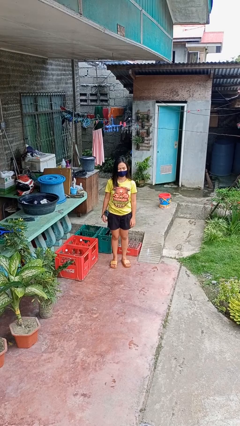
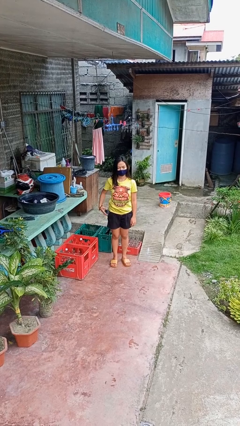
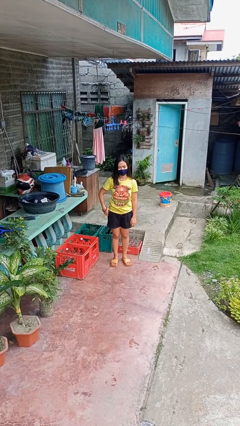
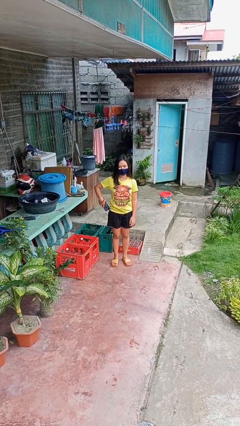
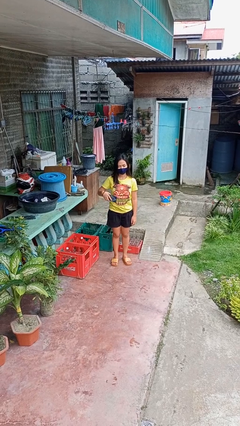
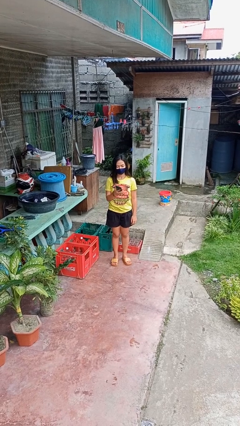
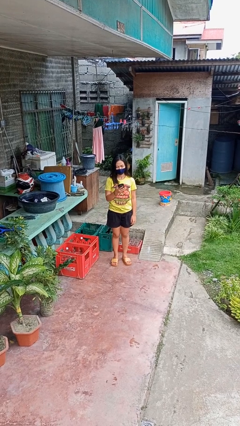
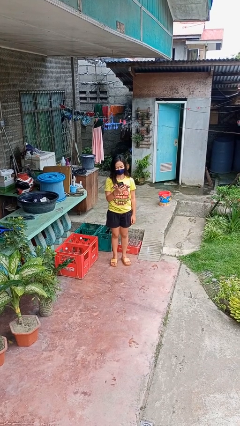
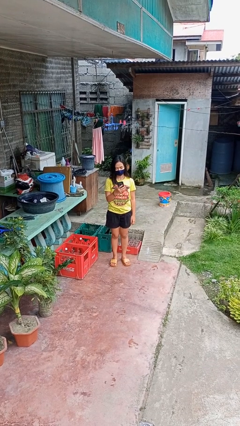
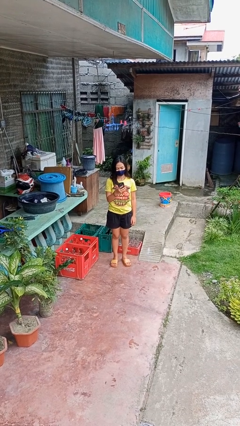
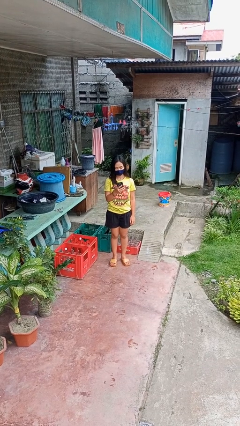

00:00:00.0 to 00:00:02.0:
person takes phone from pocket

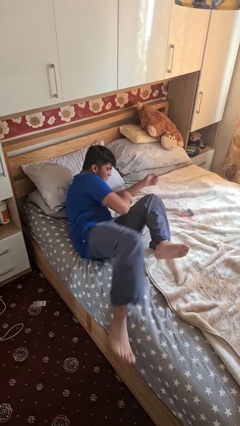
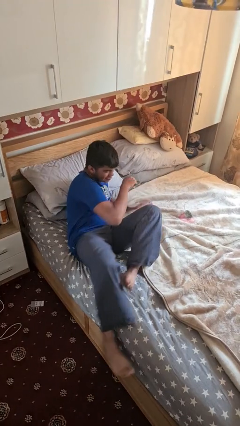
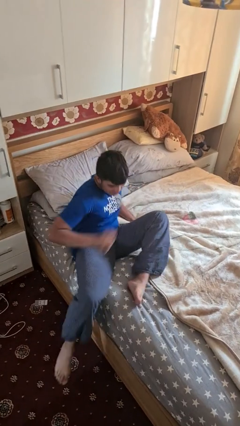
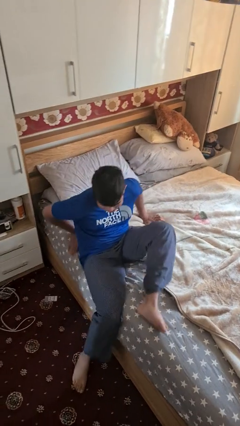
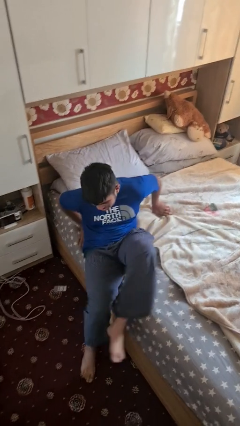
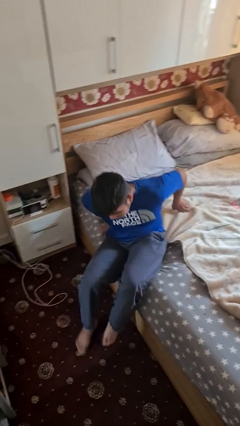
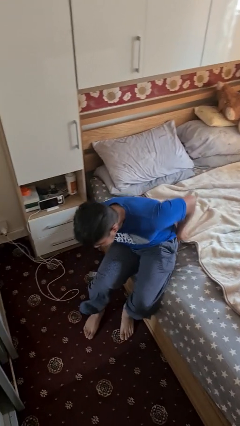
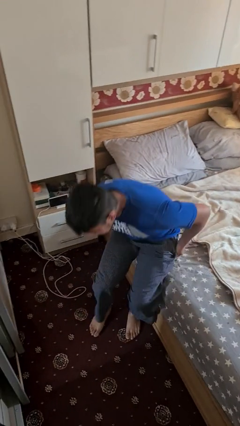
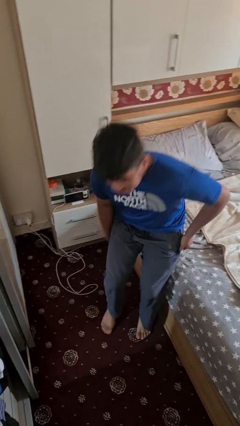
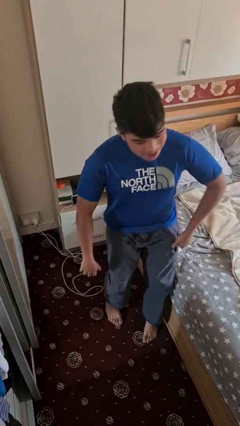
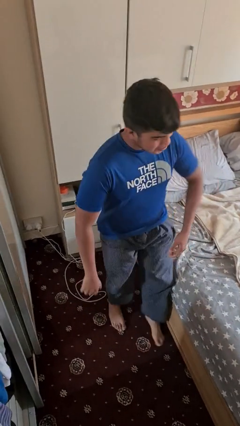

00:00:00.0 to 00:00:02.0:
person stands up

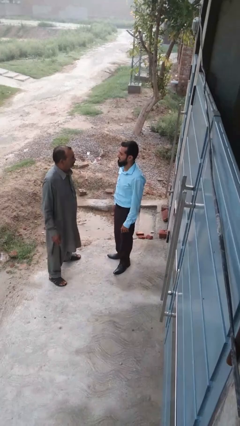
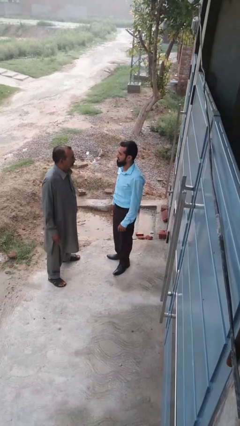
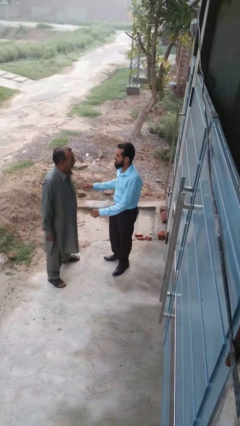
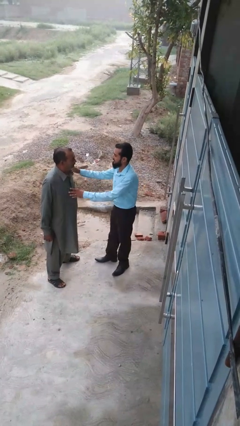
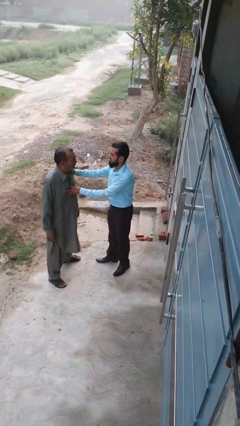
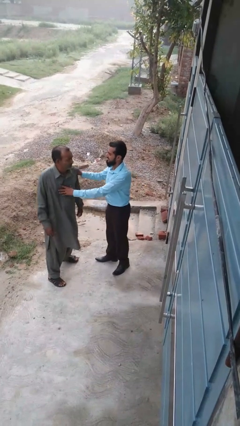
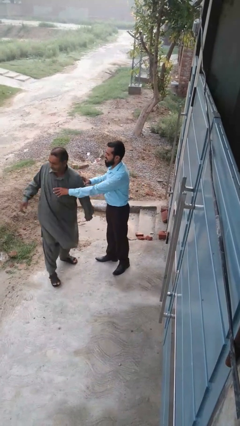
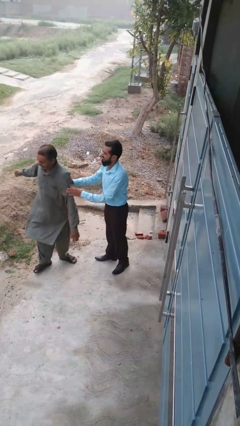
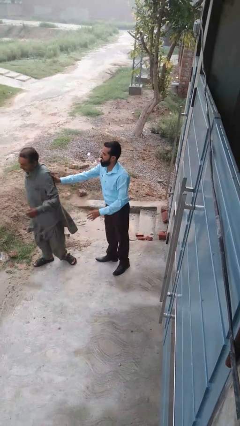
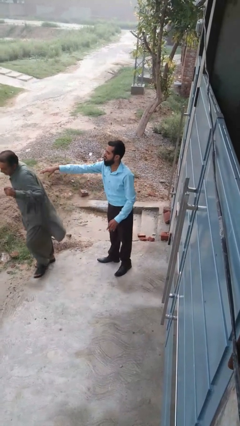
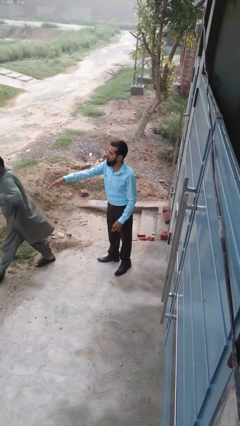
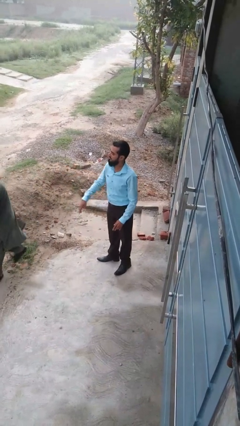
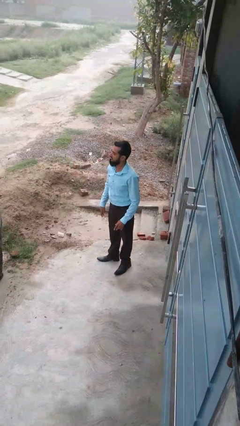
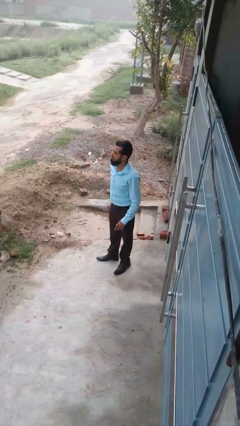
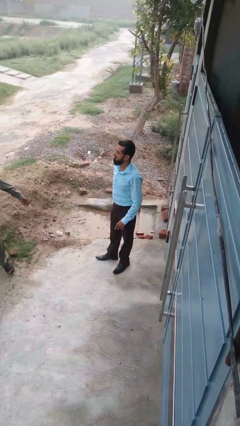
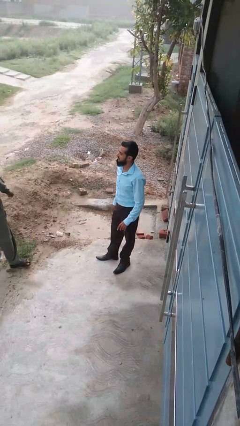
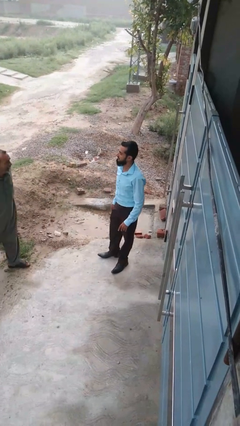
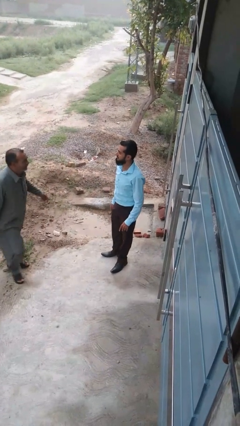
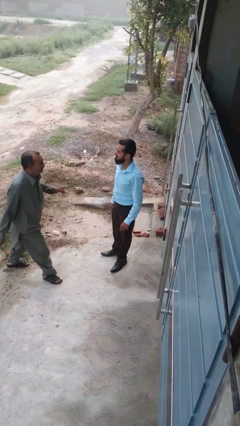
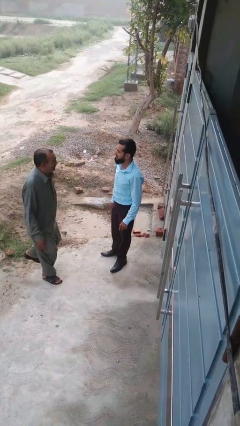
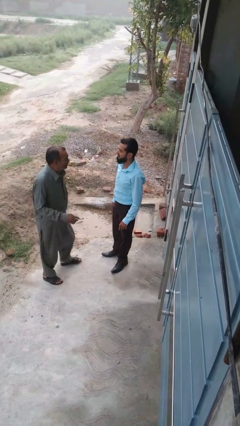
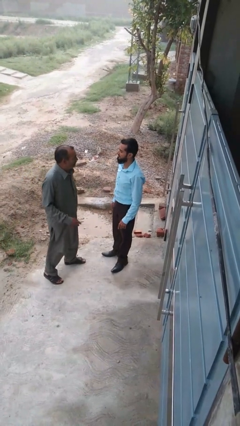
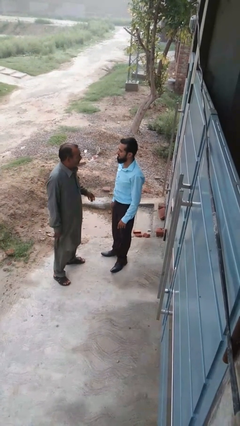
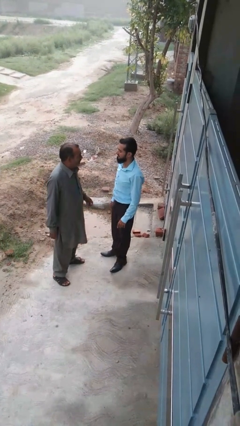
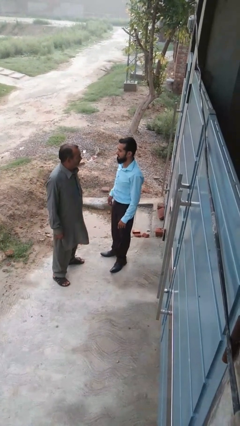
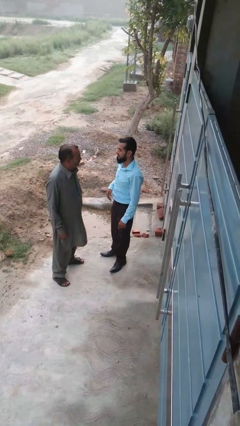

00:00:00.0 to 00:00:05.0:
person shoves person

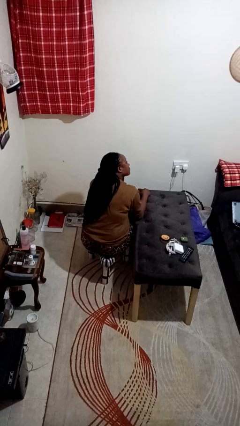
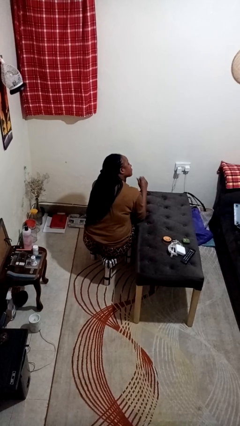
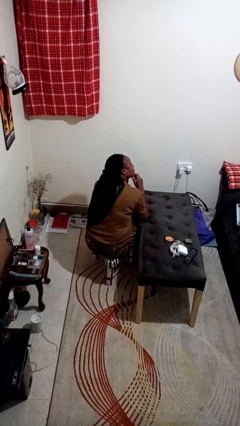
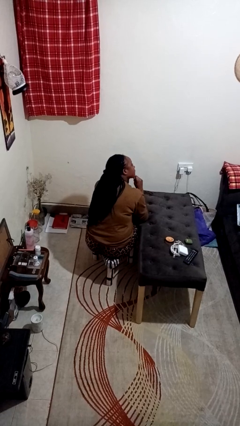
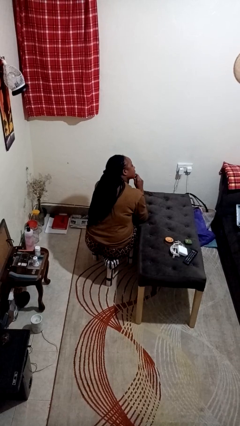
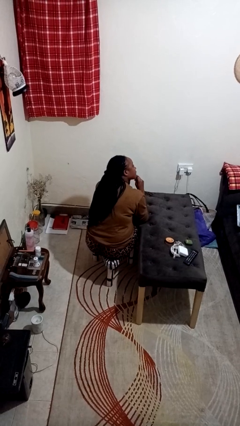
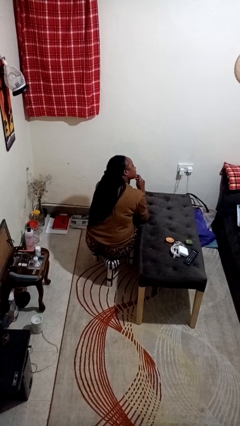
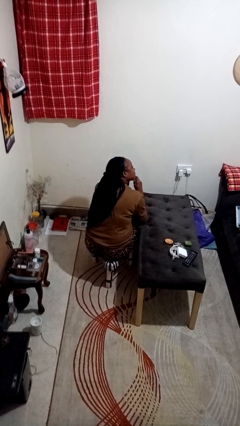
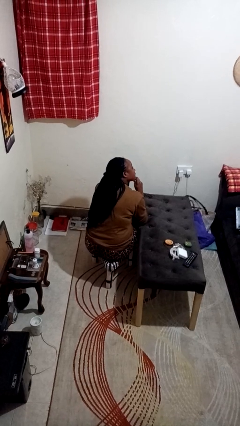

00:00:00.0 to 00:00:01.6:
person strokes chin

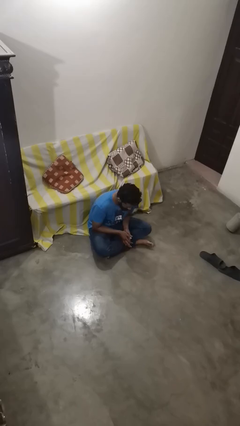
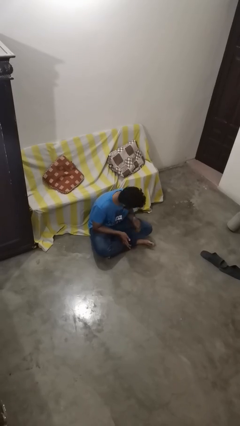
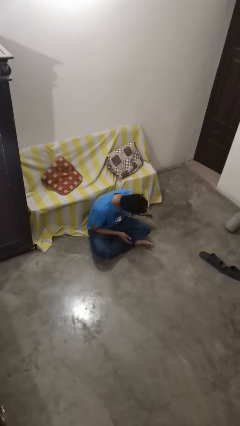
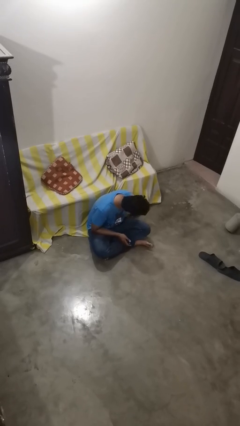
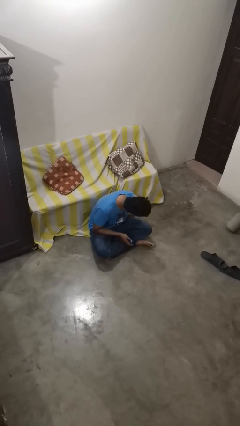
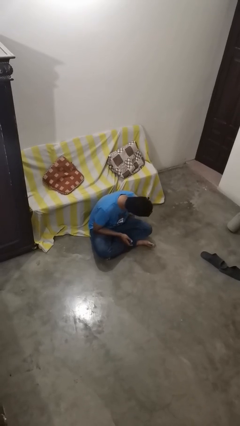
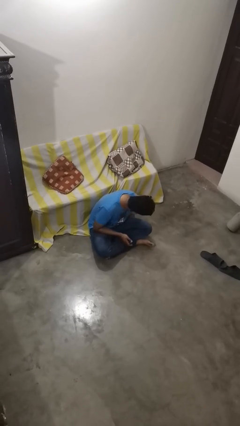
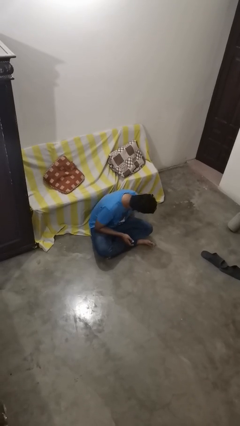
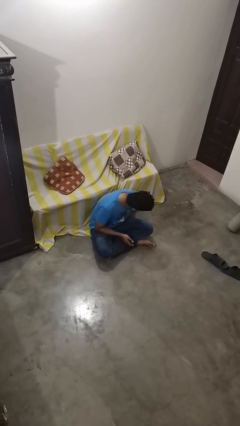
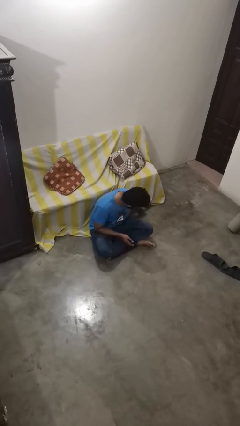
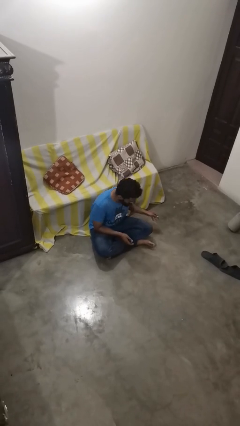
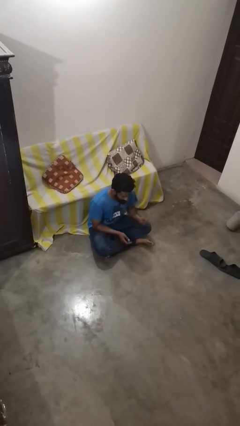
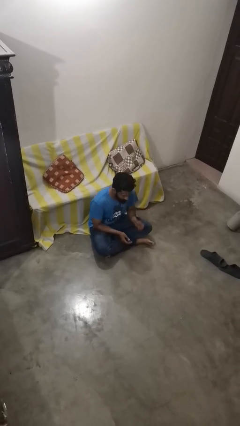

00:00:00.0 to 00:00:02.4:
person searches under couch

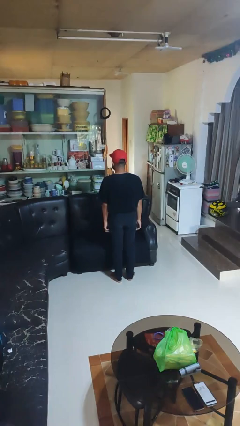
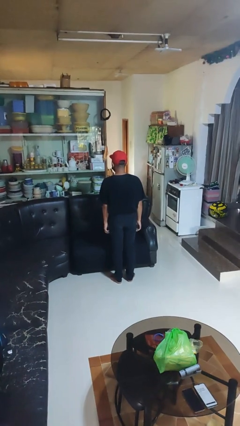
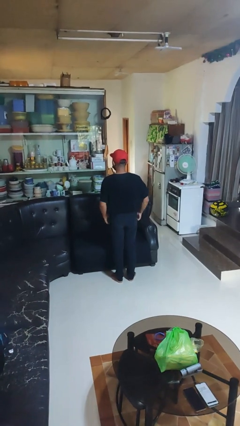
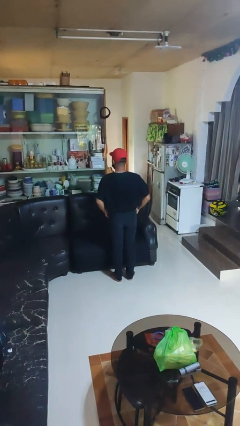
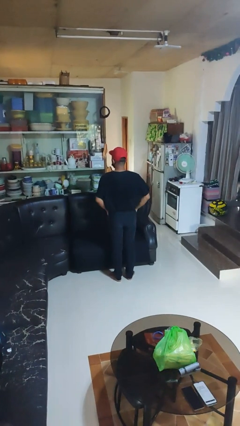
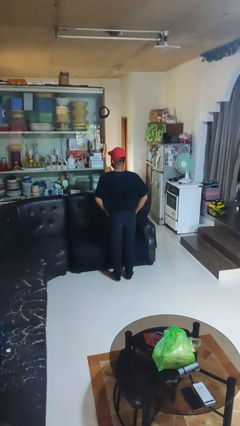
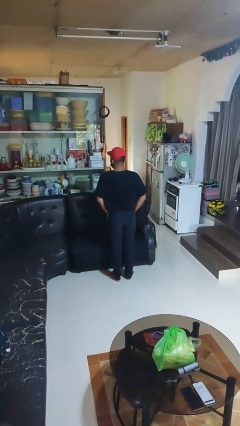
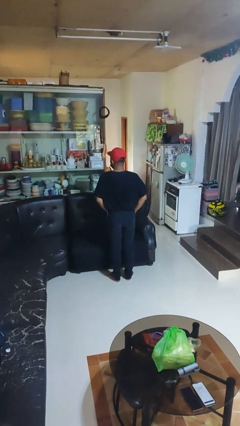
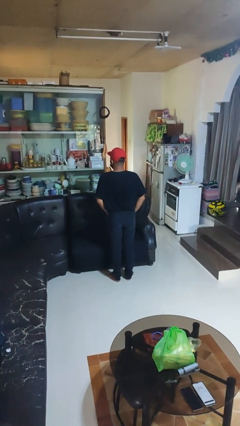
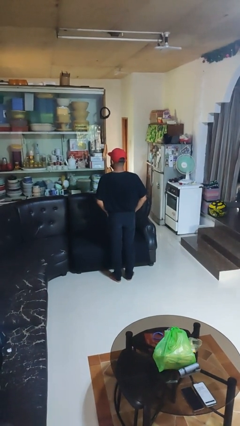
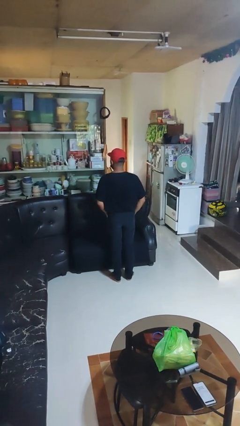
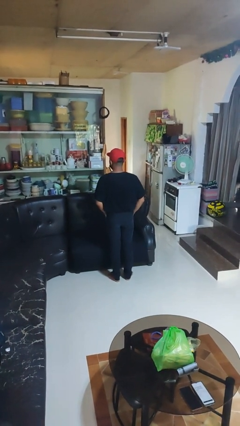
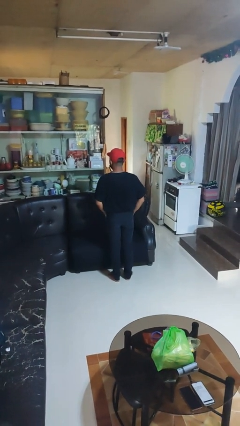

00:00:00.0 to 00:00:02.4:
person puts hands in back pockets

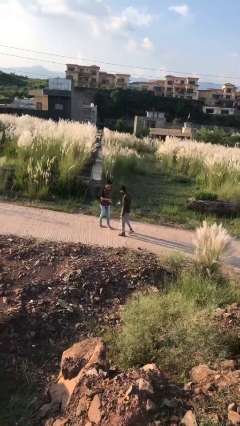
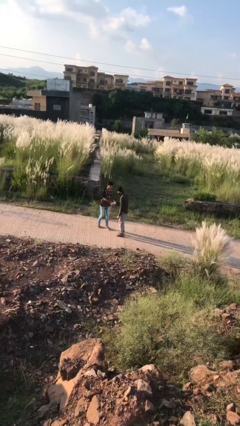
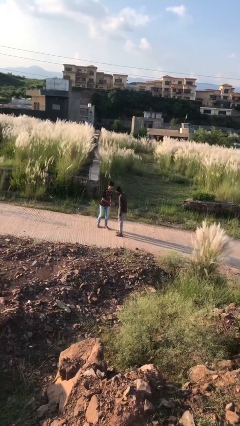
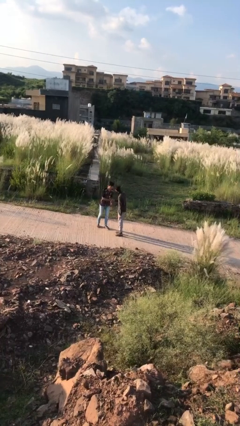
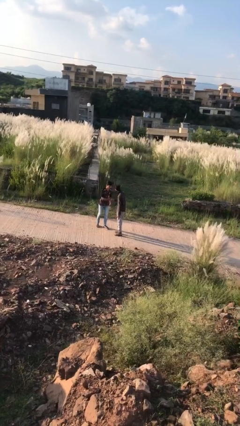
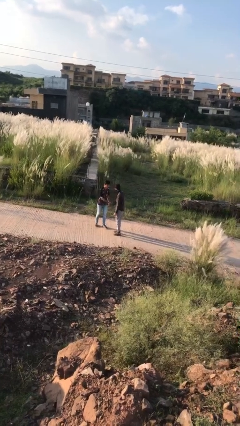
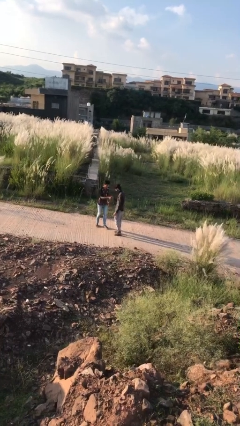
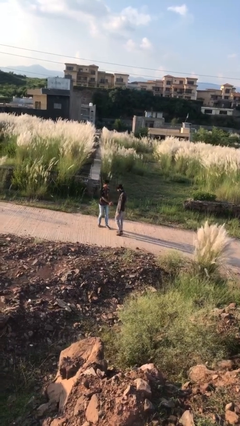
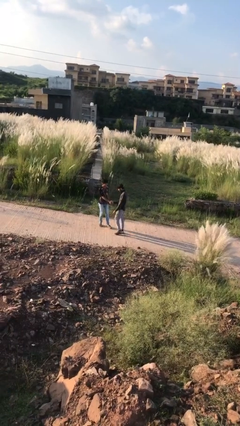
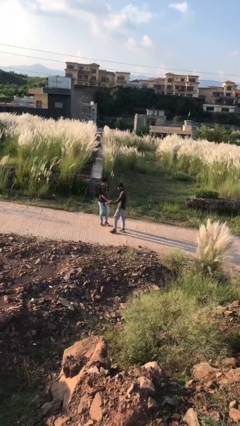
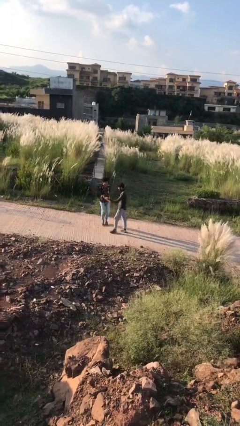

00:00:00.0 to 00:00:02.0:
person shakes hand
